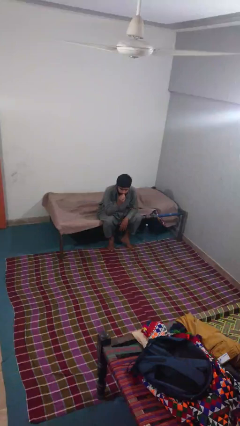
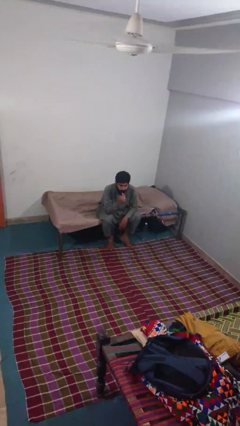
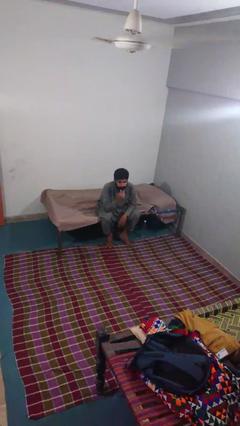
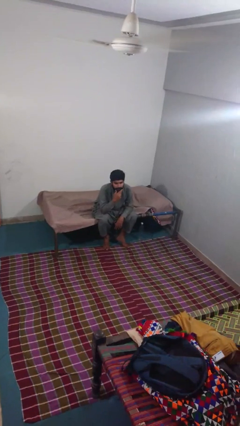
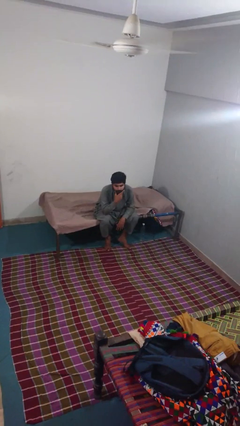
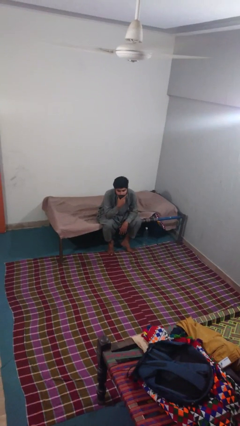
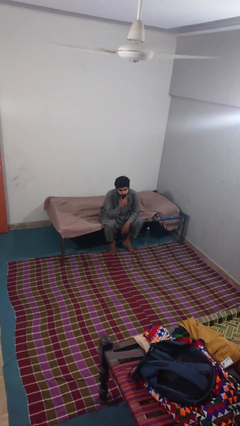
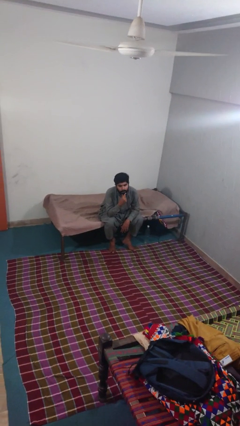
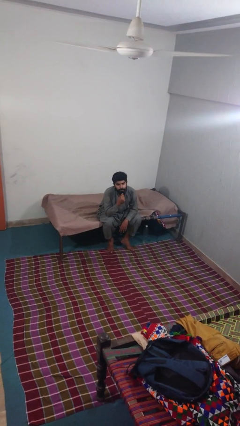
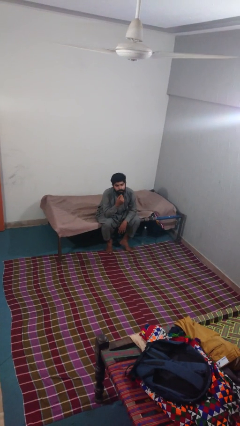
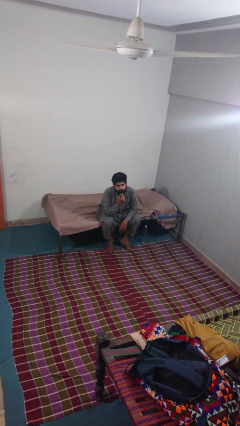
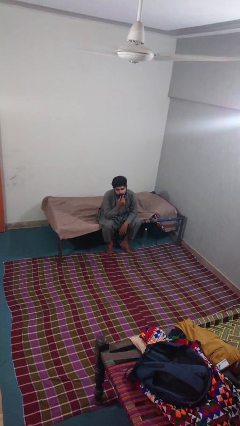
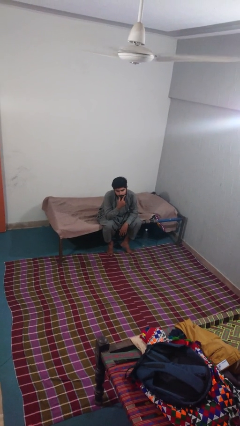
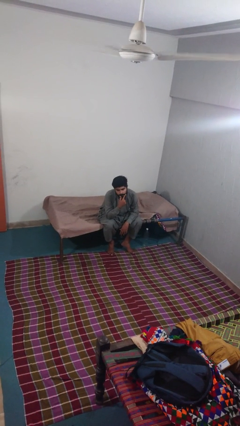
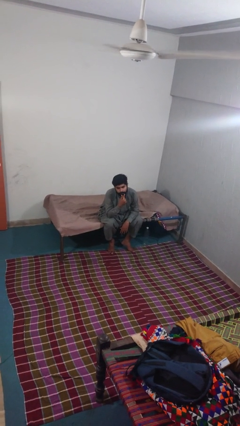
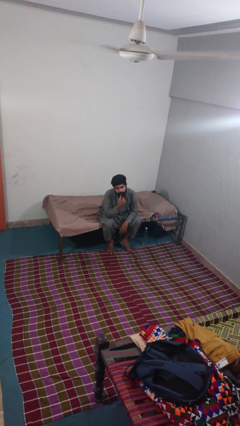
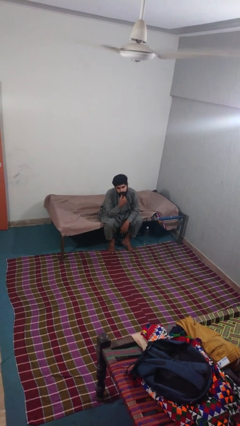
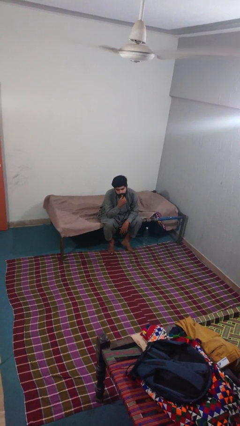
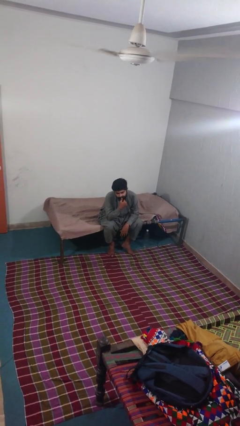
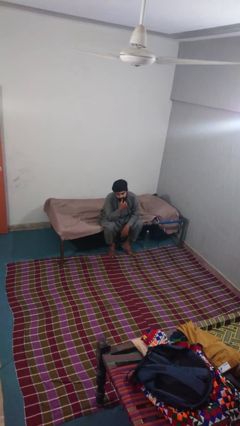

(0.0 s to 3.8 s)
person strokes chin

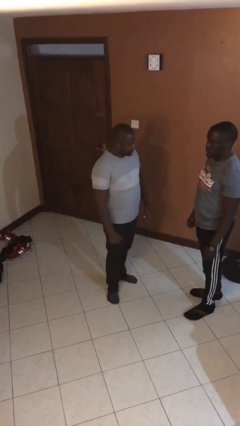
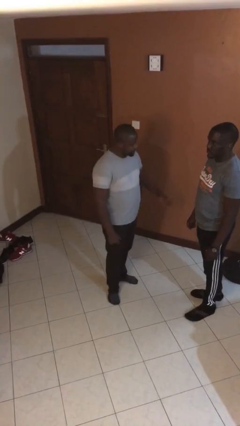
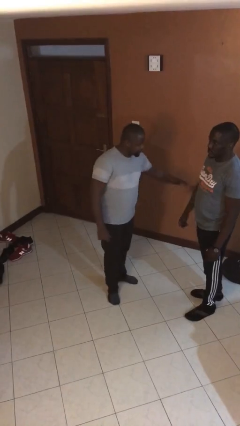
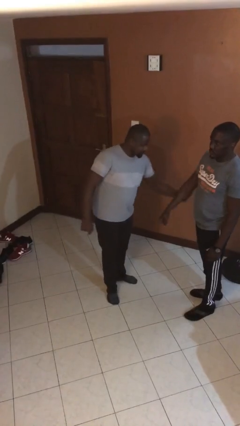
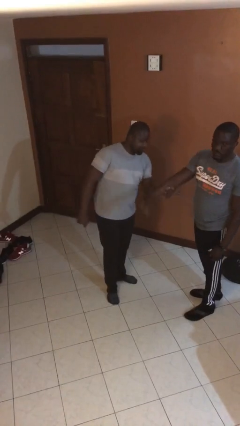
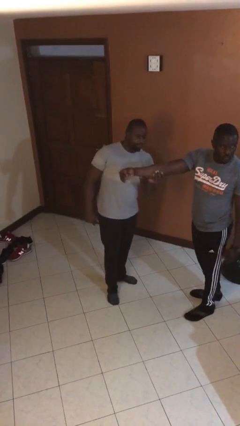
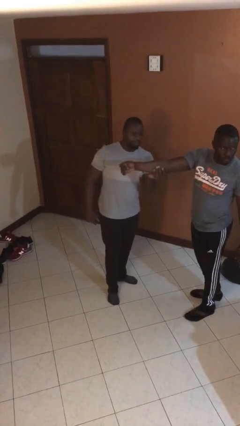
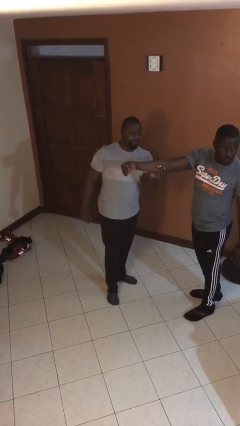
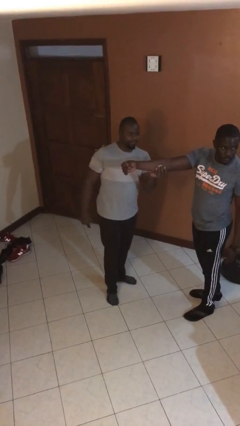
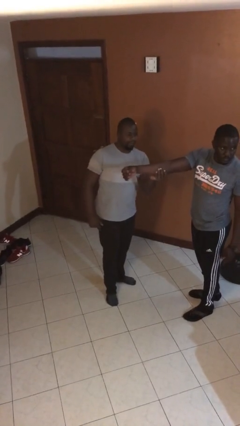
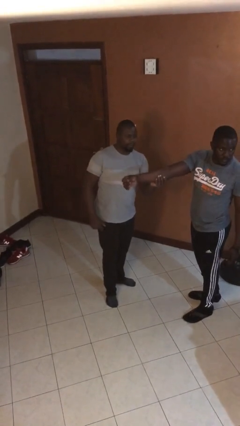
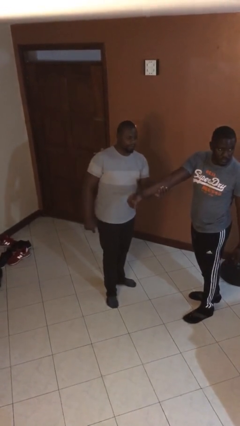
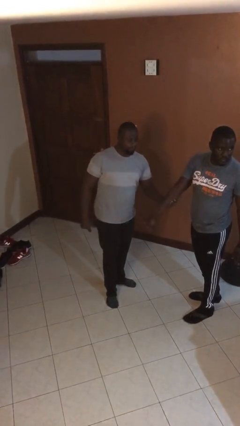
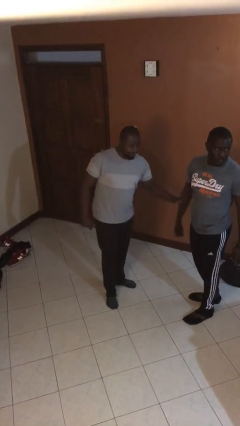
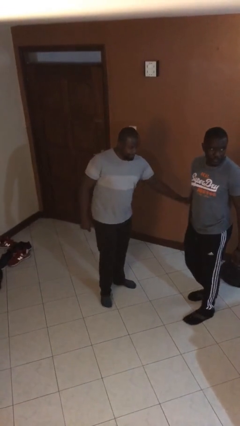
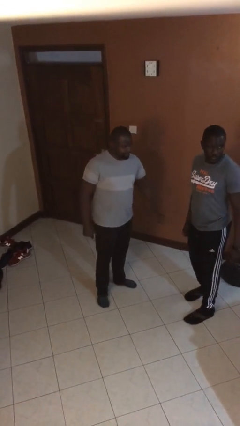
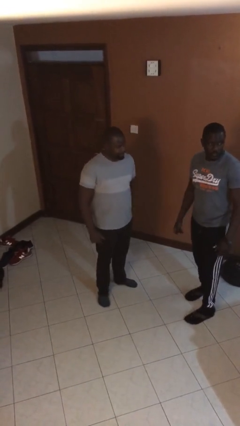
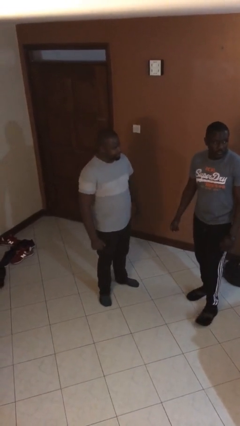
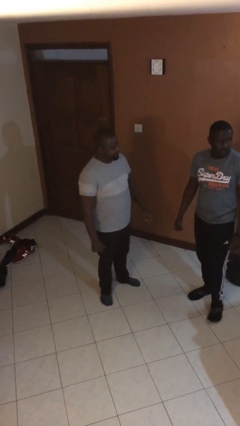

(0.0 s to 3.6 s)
person grabs person by forearm

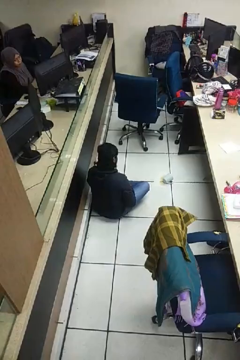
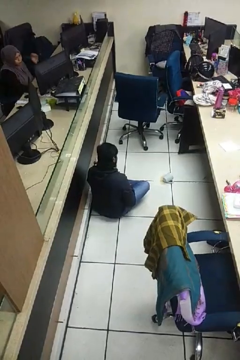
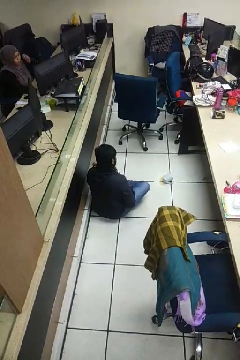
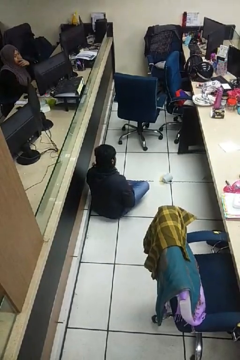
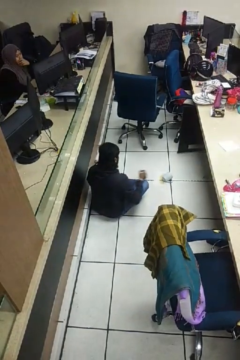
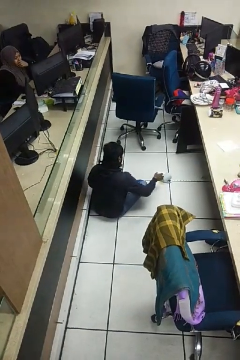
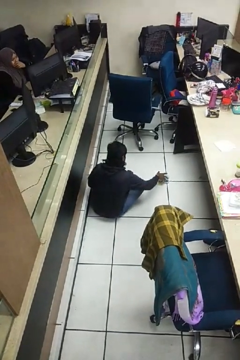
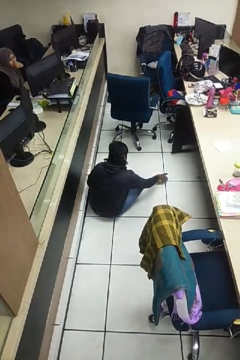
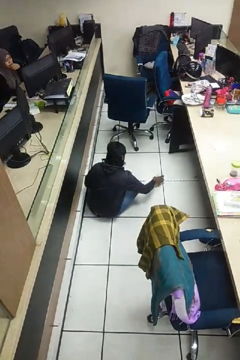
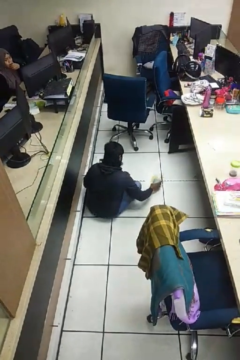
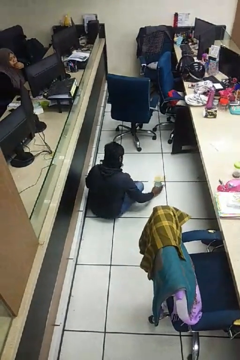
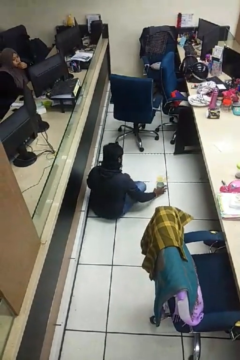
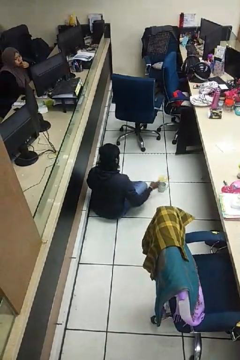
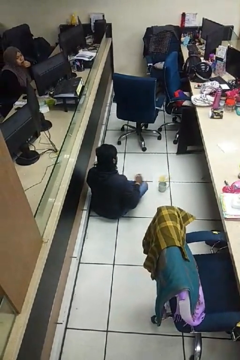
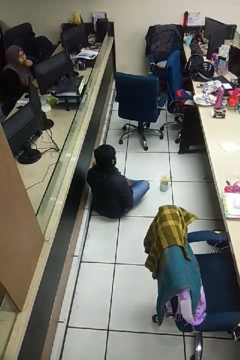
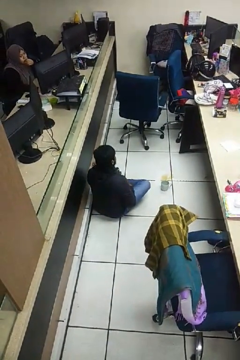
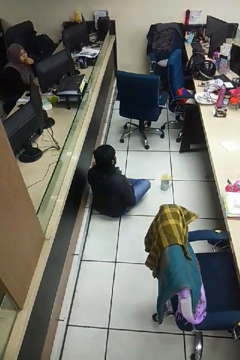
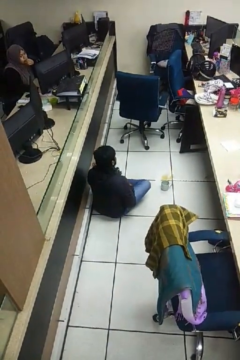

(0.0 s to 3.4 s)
person sets upright glass

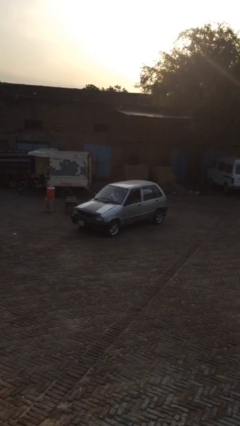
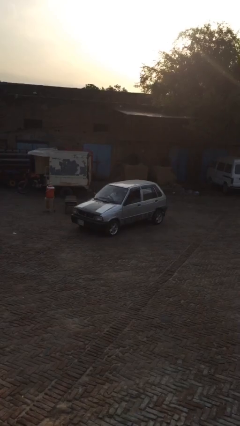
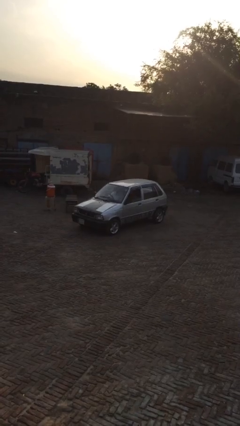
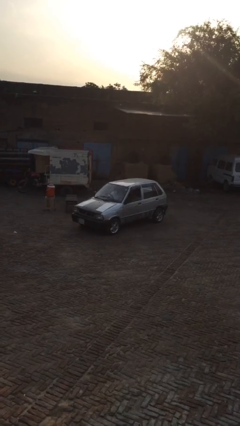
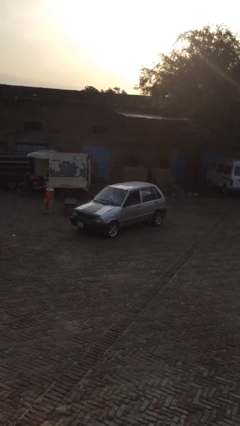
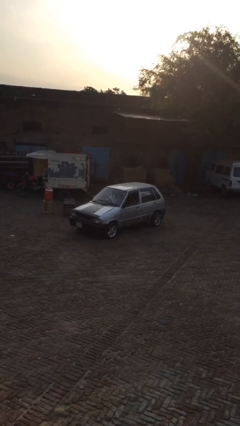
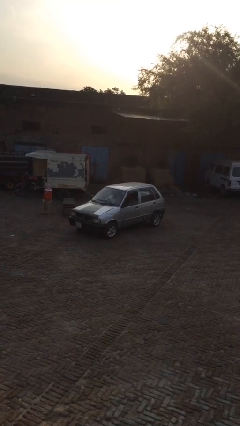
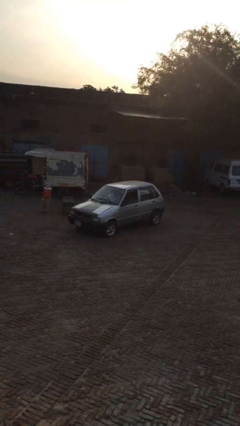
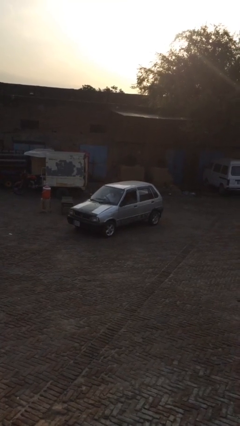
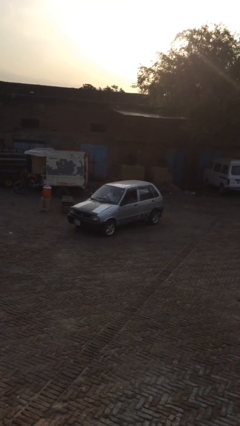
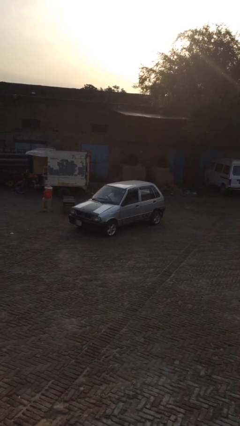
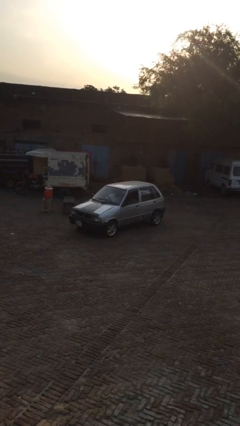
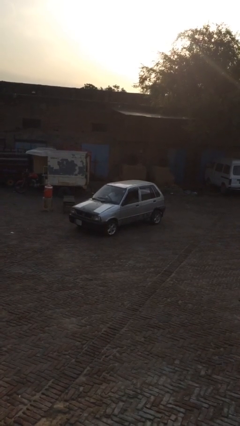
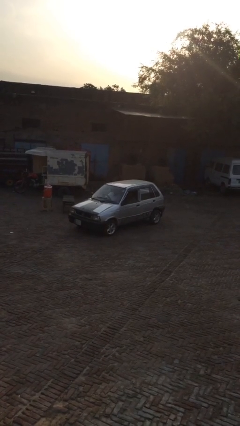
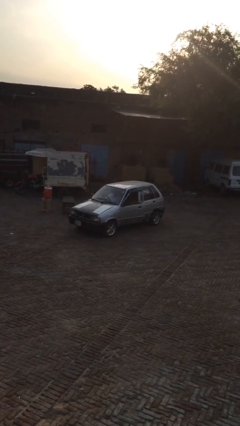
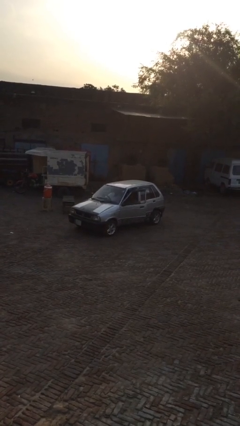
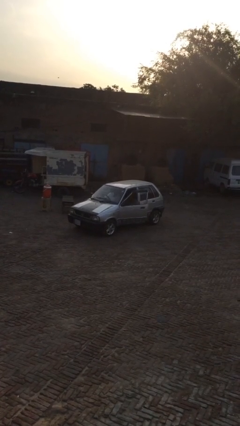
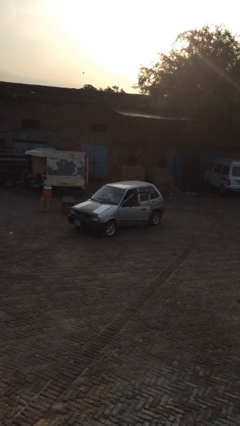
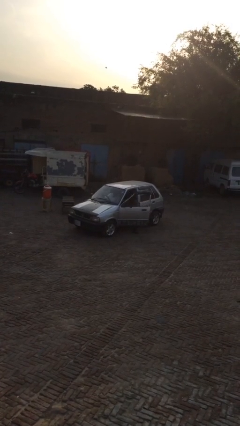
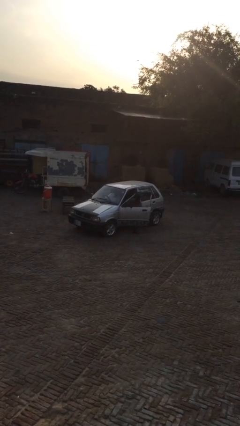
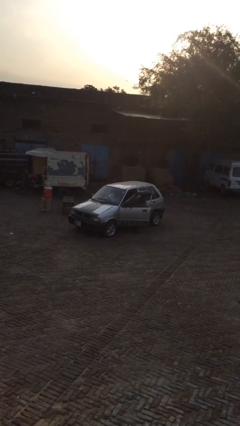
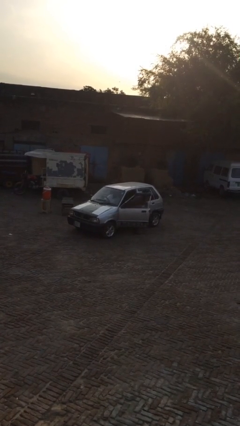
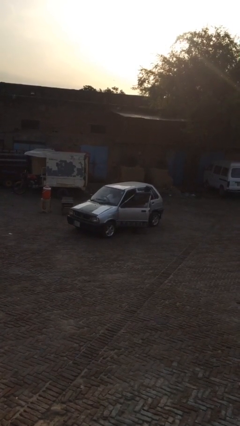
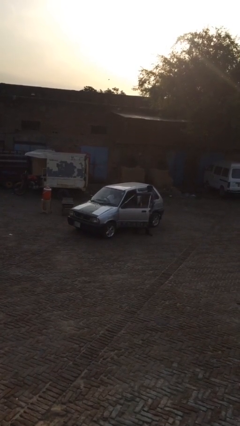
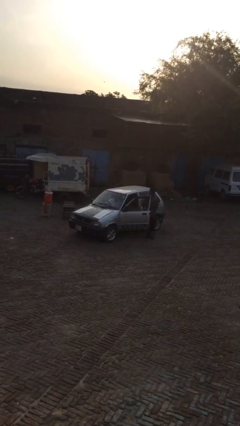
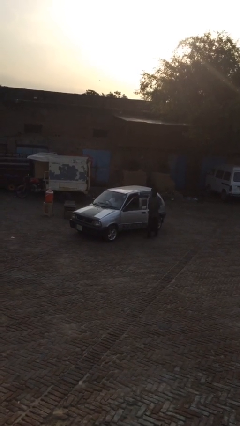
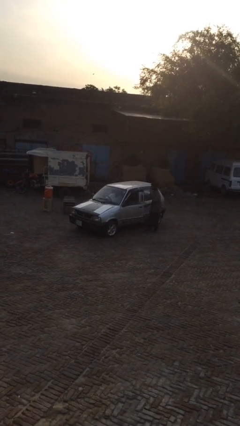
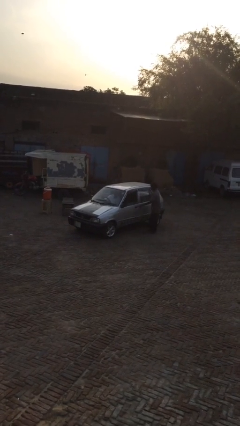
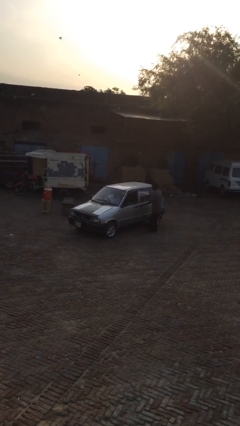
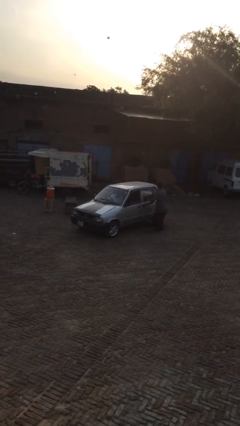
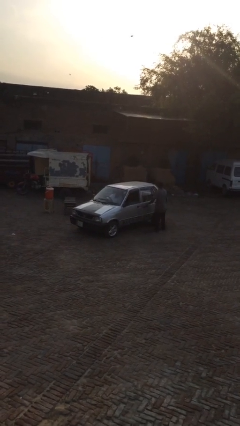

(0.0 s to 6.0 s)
car drops off person

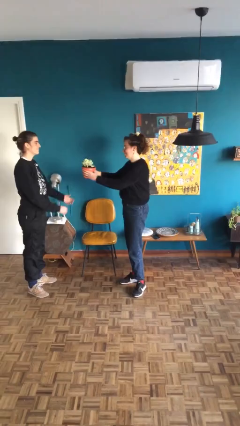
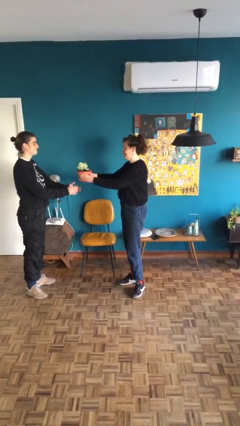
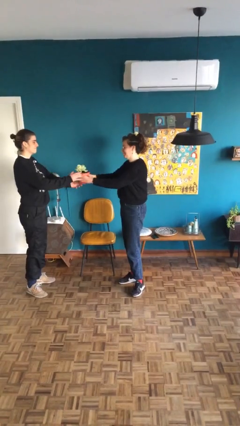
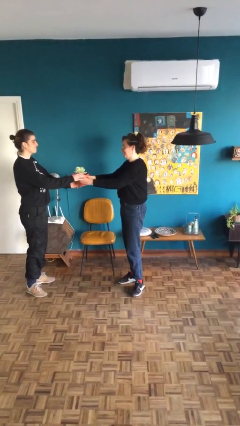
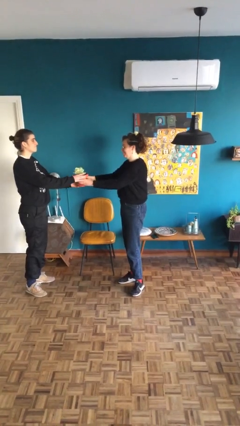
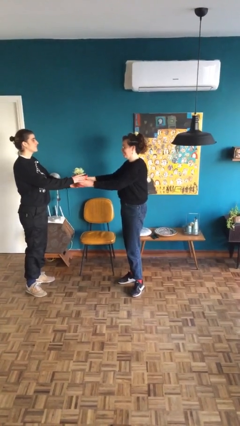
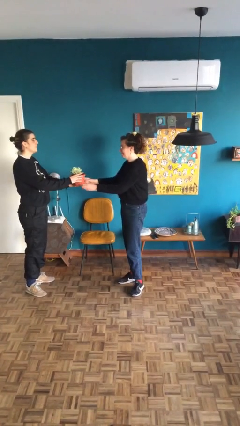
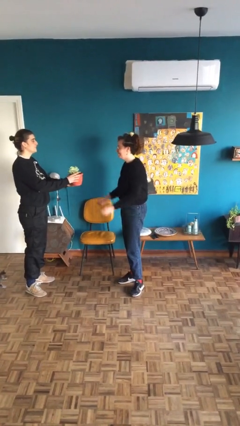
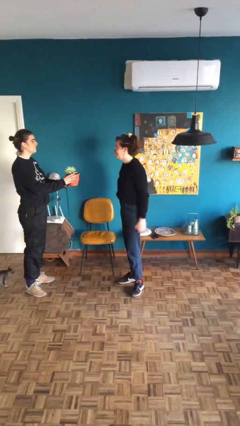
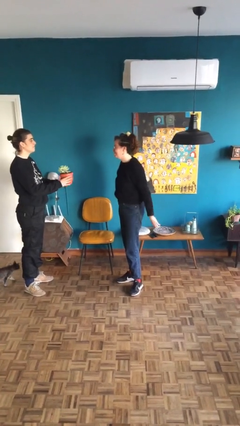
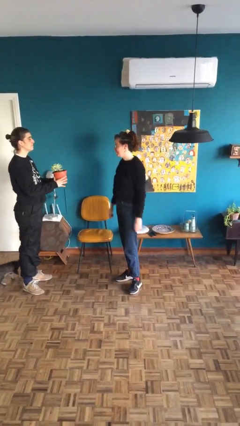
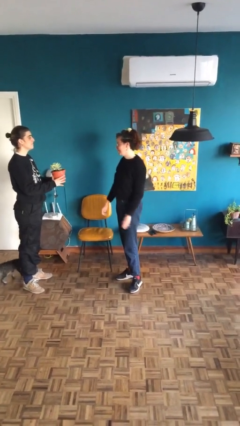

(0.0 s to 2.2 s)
person transfers object to person
